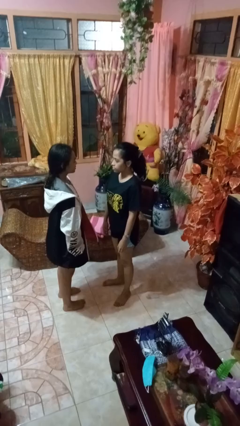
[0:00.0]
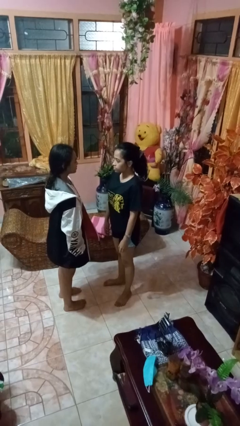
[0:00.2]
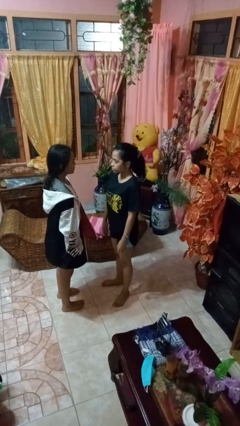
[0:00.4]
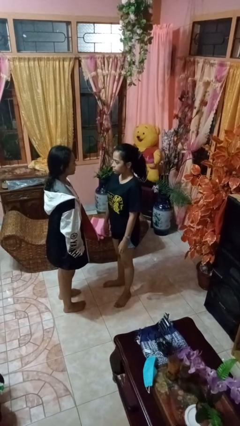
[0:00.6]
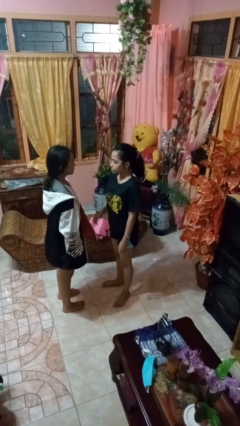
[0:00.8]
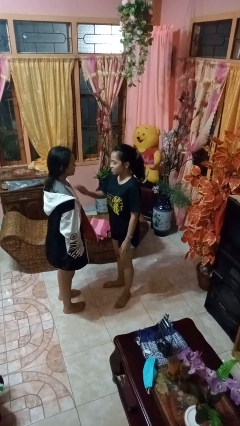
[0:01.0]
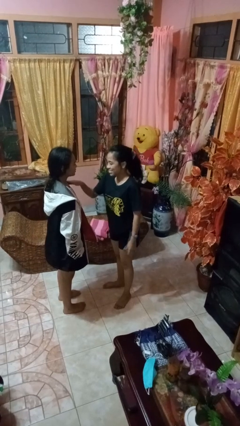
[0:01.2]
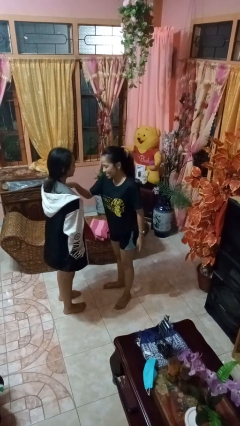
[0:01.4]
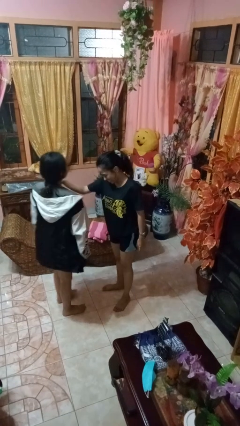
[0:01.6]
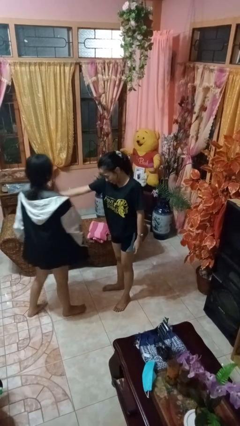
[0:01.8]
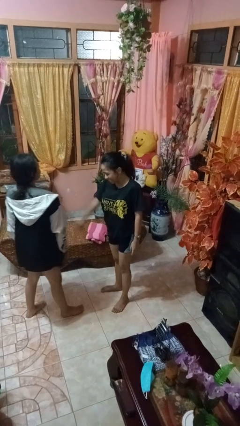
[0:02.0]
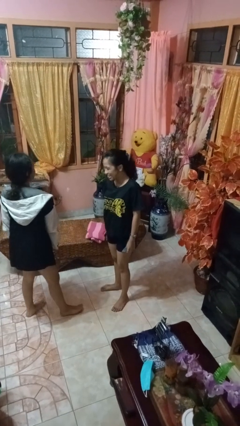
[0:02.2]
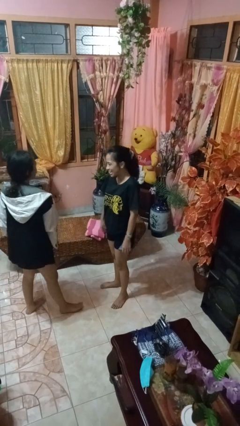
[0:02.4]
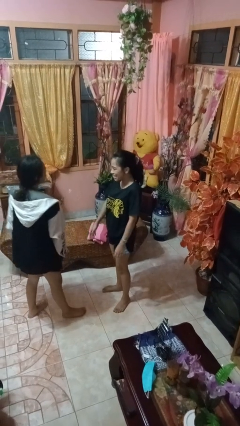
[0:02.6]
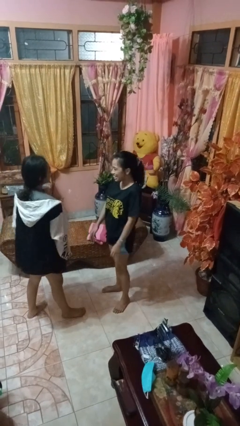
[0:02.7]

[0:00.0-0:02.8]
person shoves person

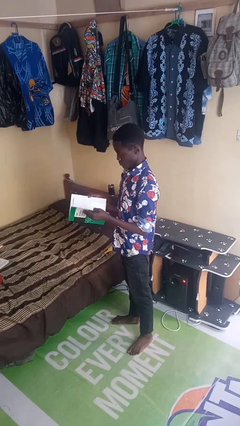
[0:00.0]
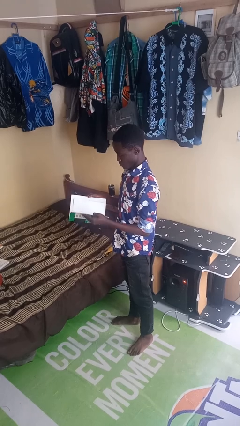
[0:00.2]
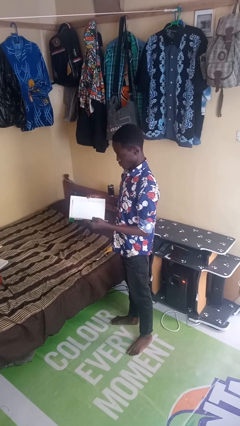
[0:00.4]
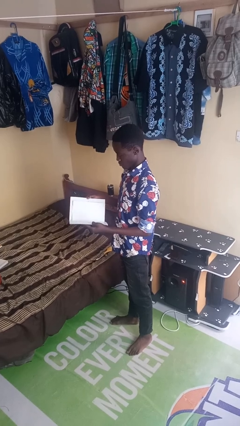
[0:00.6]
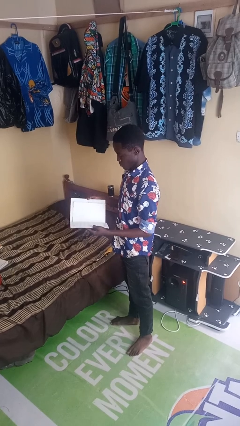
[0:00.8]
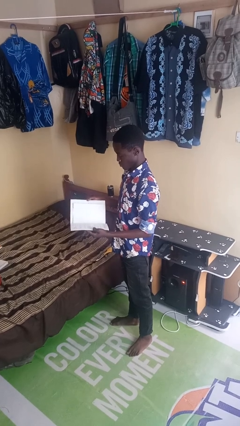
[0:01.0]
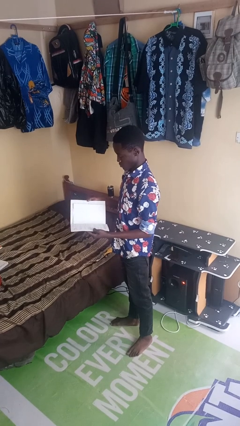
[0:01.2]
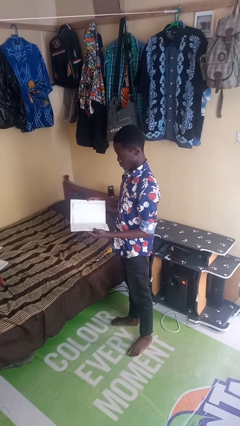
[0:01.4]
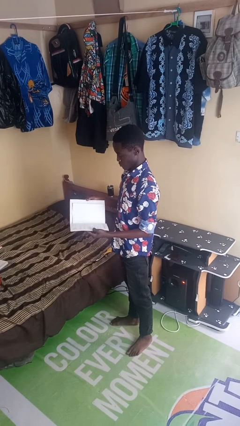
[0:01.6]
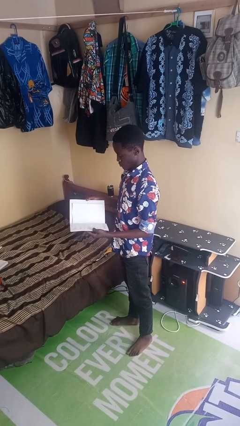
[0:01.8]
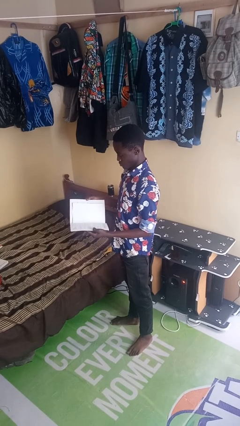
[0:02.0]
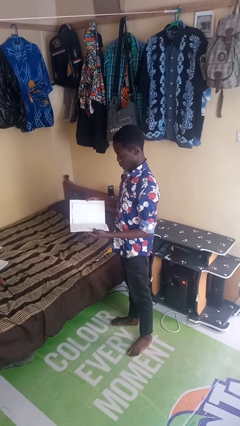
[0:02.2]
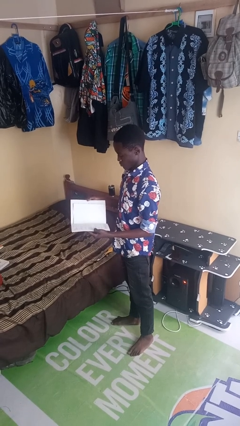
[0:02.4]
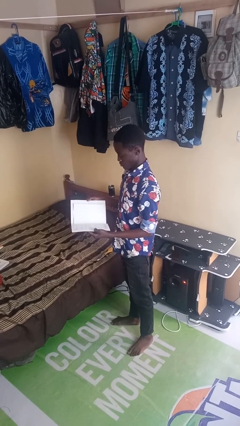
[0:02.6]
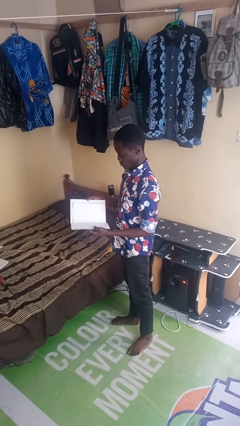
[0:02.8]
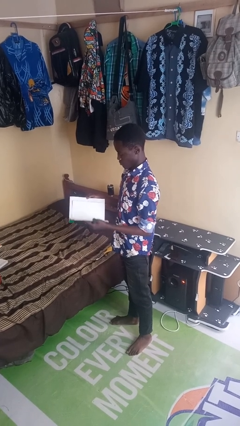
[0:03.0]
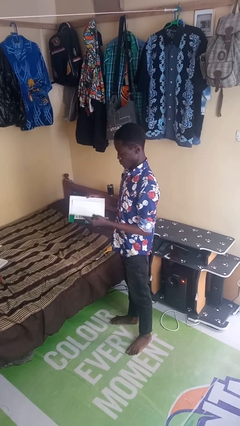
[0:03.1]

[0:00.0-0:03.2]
person reads magazine

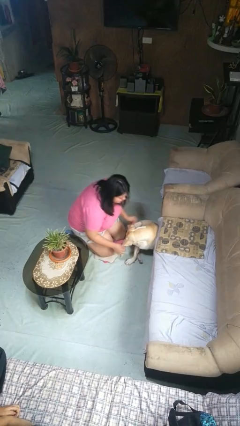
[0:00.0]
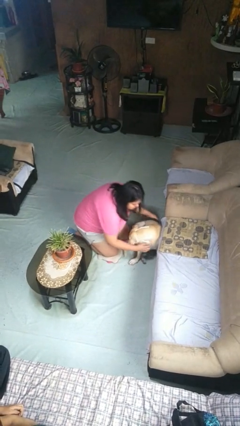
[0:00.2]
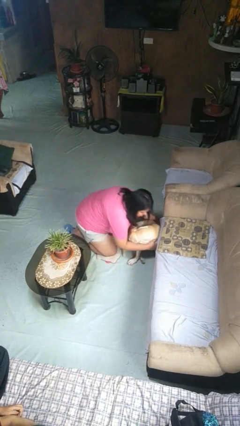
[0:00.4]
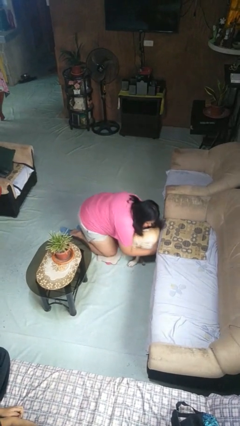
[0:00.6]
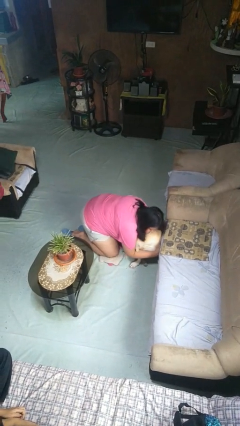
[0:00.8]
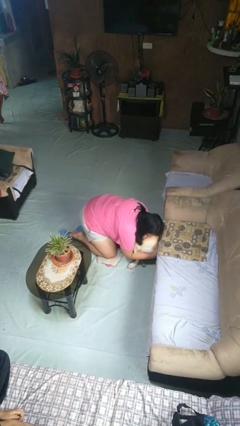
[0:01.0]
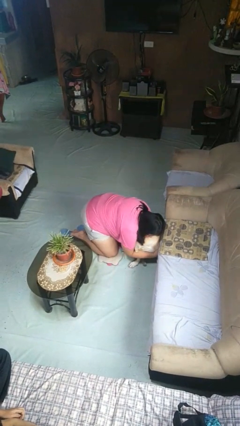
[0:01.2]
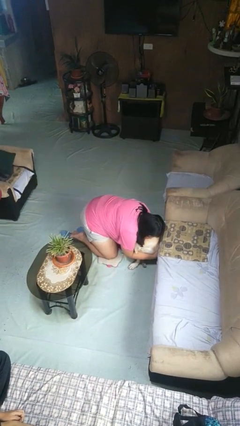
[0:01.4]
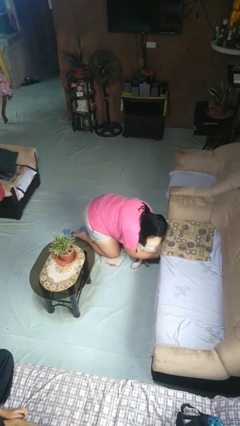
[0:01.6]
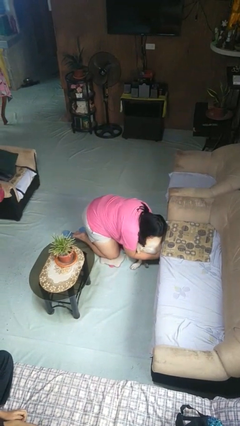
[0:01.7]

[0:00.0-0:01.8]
person hugs dog

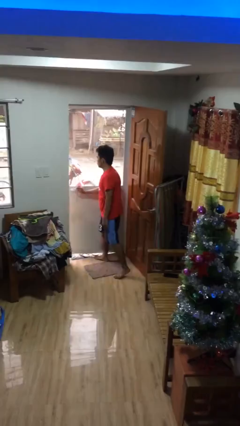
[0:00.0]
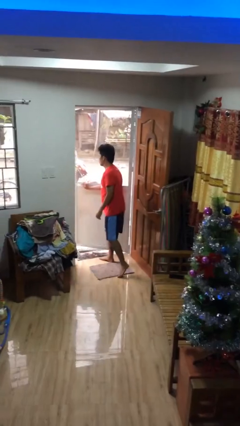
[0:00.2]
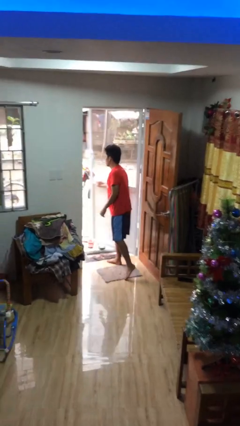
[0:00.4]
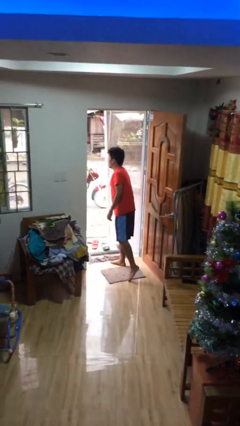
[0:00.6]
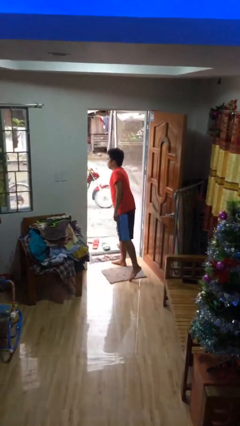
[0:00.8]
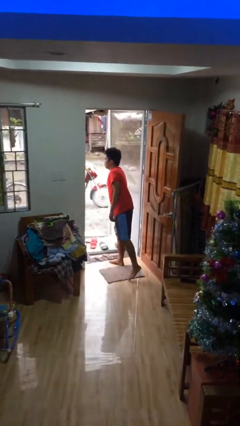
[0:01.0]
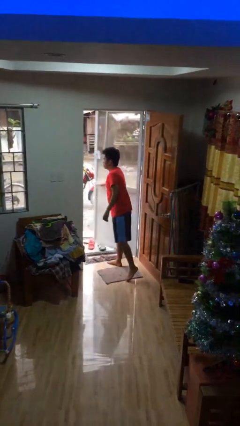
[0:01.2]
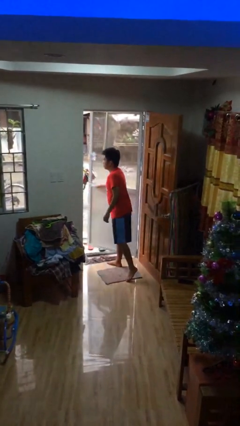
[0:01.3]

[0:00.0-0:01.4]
person opens facility door

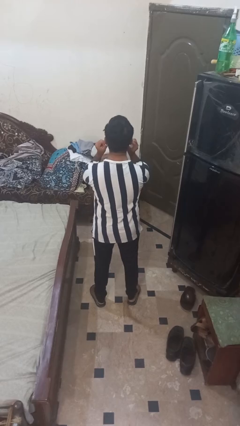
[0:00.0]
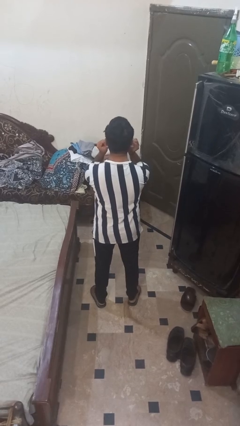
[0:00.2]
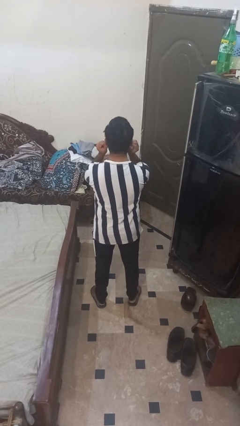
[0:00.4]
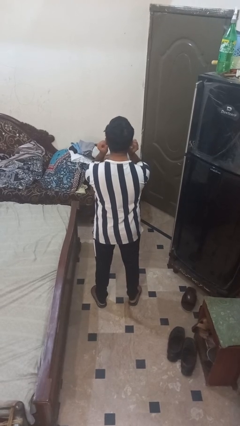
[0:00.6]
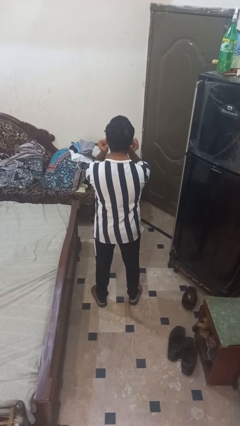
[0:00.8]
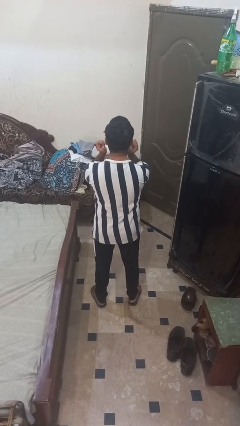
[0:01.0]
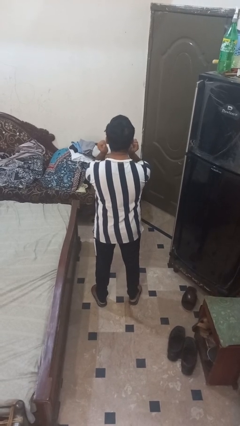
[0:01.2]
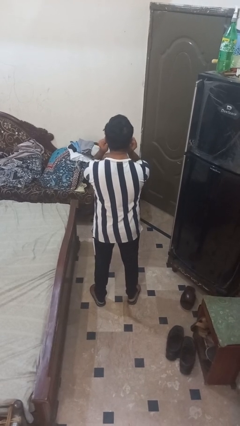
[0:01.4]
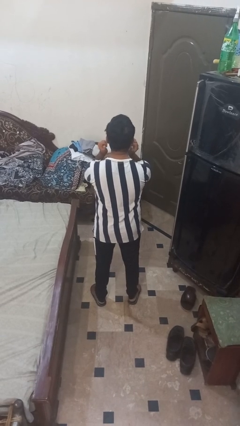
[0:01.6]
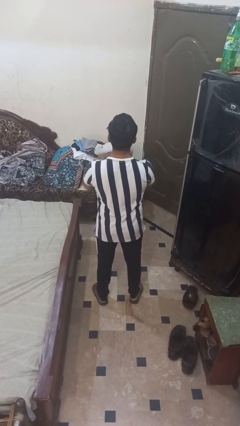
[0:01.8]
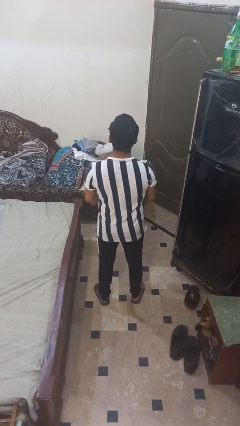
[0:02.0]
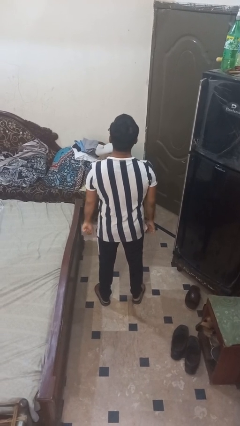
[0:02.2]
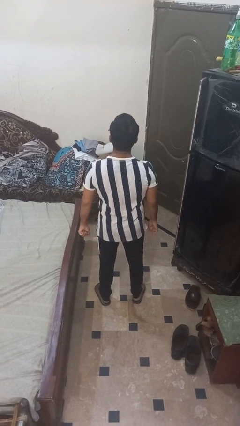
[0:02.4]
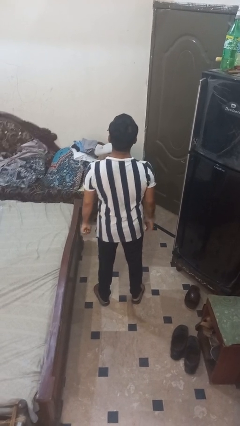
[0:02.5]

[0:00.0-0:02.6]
person touches earlobe

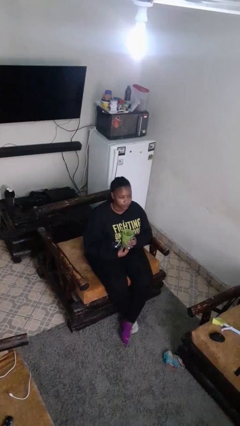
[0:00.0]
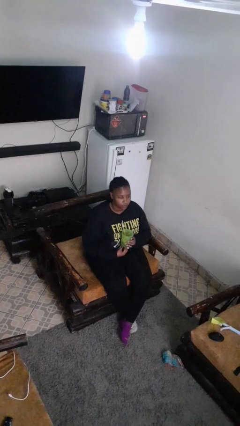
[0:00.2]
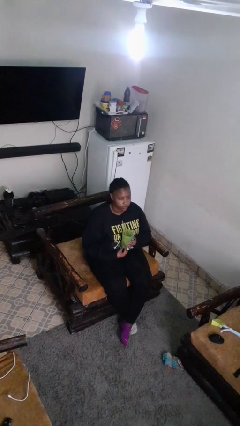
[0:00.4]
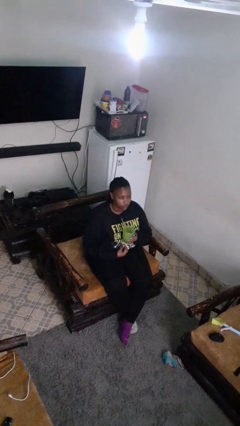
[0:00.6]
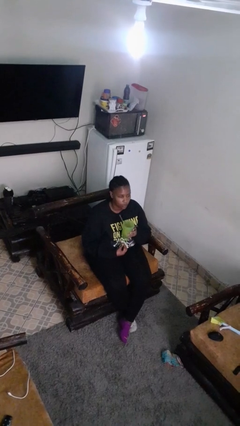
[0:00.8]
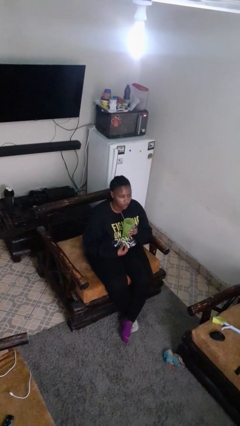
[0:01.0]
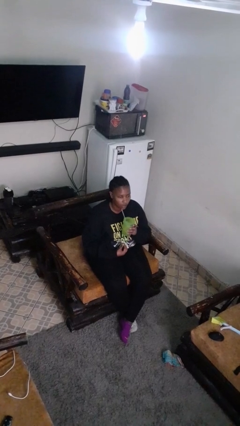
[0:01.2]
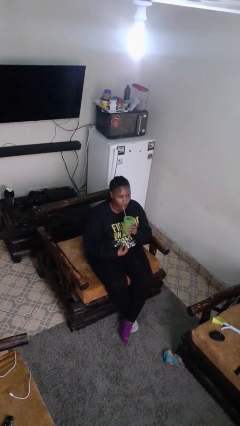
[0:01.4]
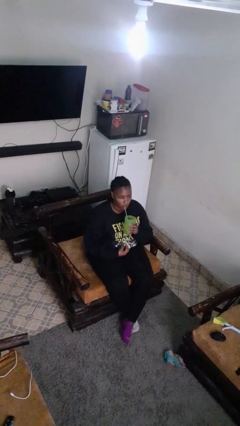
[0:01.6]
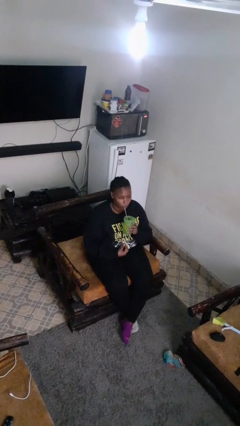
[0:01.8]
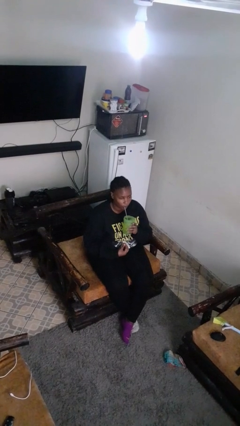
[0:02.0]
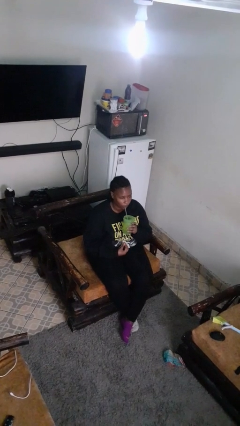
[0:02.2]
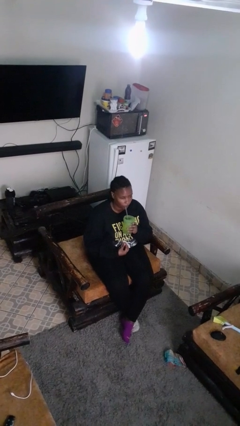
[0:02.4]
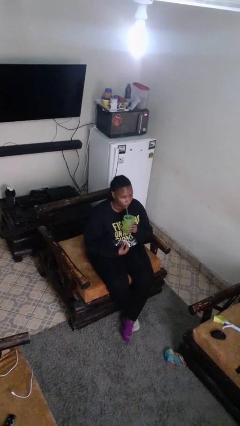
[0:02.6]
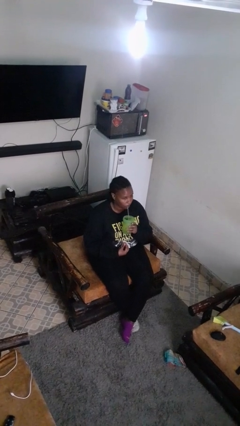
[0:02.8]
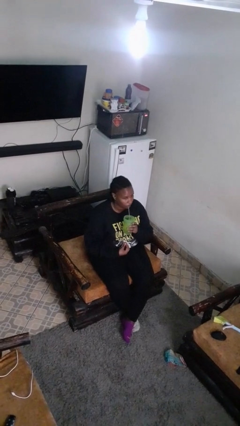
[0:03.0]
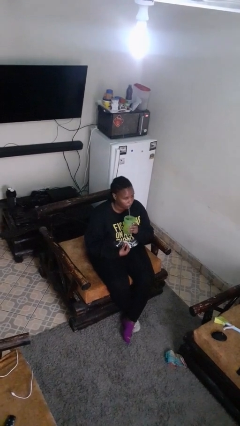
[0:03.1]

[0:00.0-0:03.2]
person drinks from straw

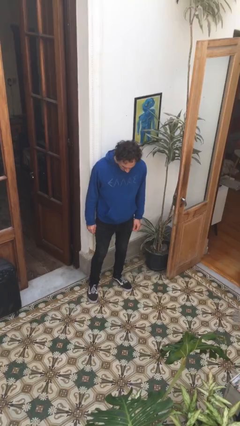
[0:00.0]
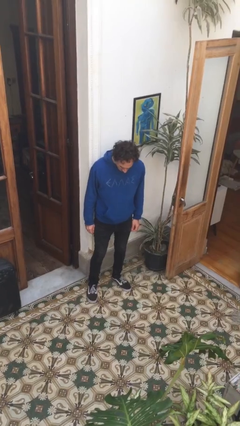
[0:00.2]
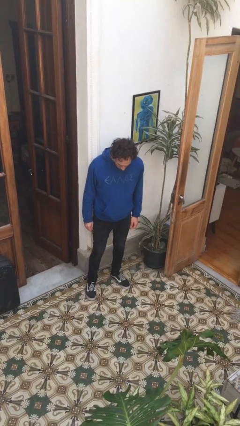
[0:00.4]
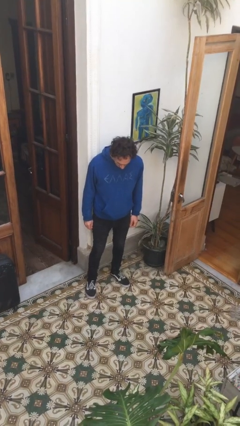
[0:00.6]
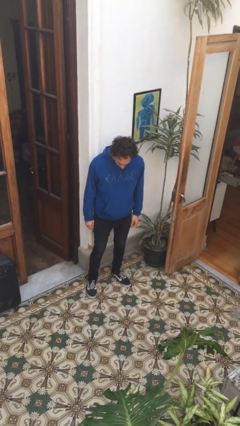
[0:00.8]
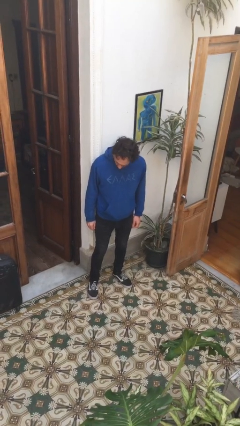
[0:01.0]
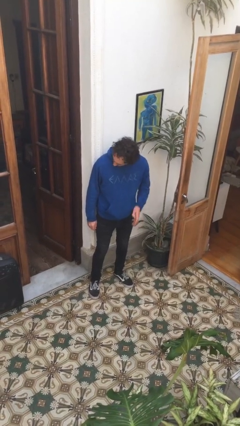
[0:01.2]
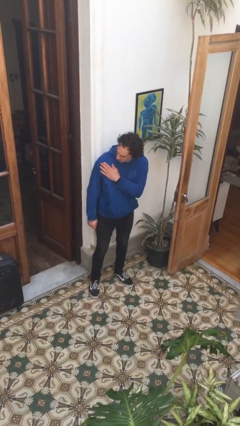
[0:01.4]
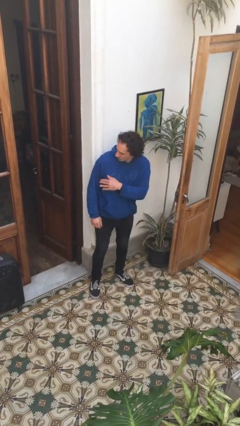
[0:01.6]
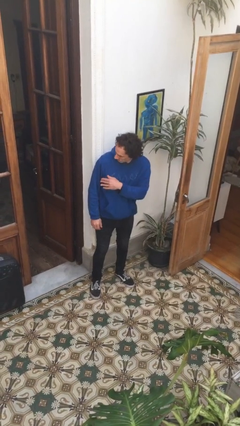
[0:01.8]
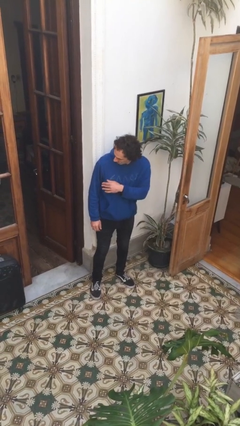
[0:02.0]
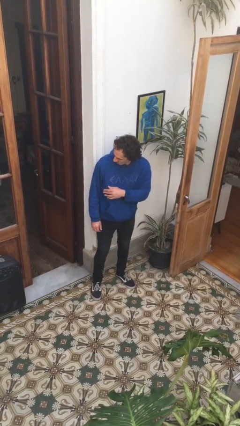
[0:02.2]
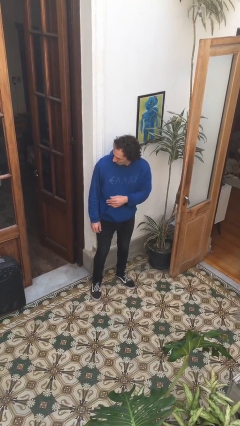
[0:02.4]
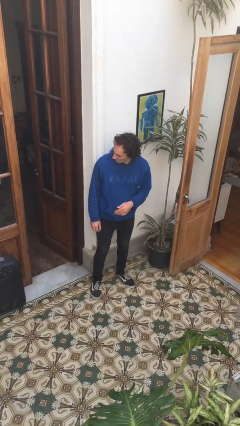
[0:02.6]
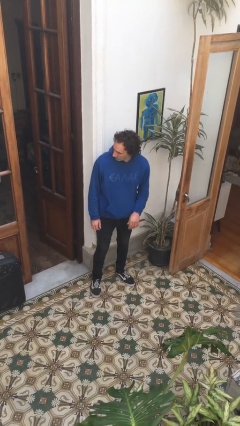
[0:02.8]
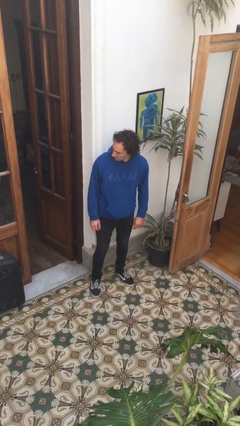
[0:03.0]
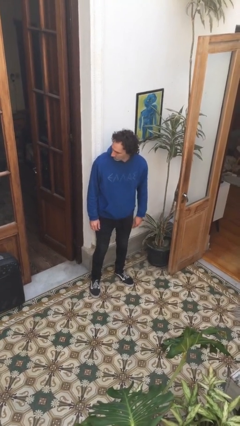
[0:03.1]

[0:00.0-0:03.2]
person swats bug
